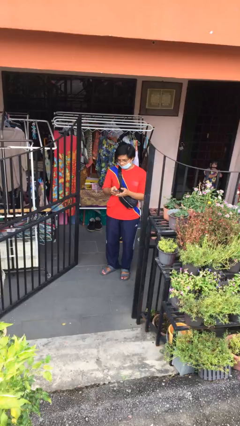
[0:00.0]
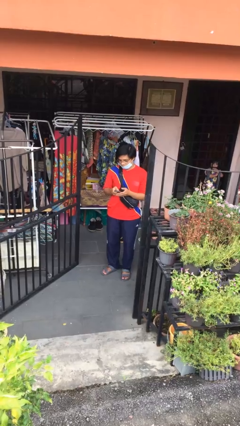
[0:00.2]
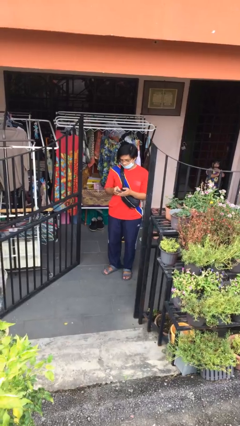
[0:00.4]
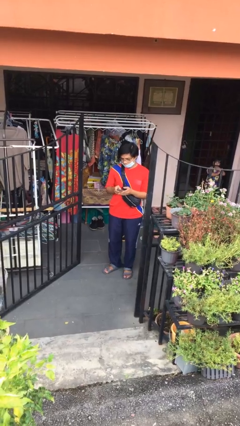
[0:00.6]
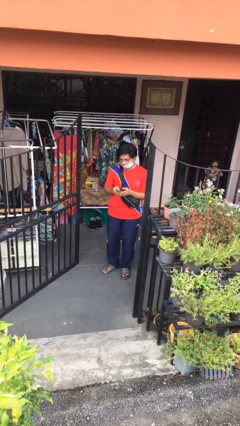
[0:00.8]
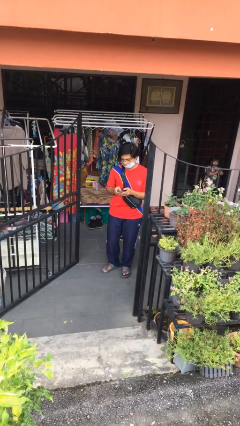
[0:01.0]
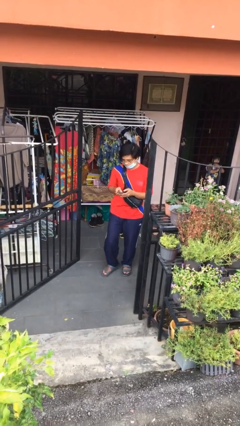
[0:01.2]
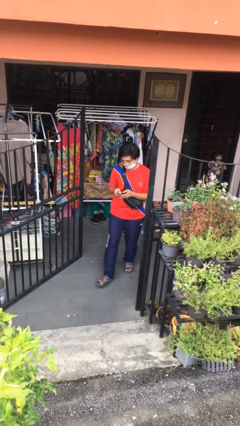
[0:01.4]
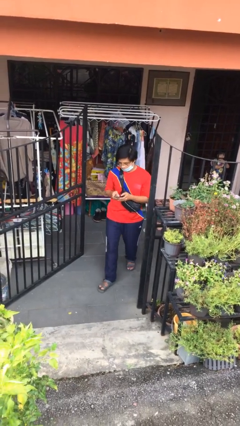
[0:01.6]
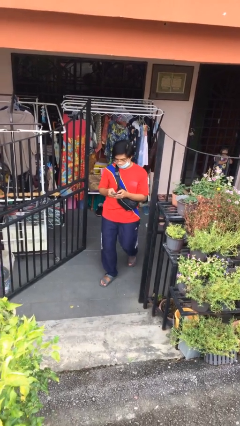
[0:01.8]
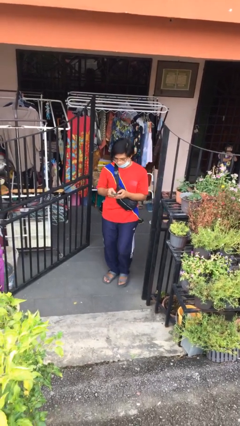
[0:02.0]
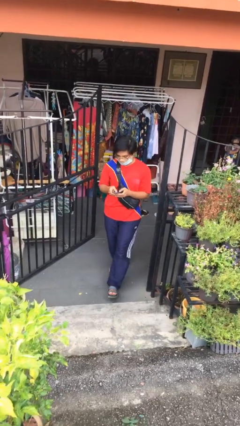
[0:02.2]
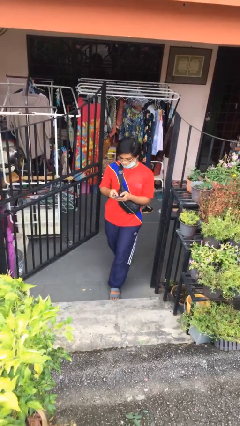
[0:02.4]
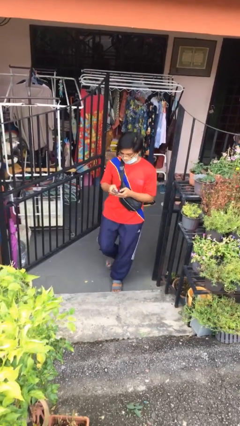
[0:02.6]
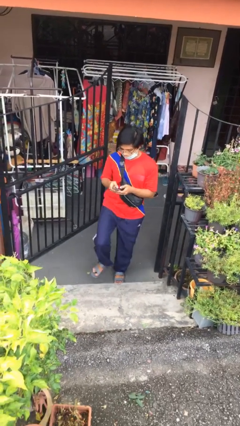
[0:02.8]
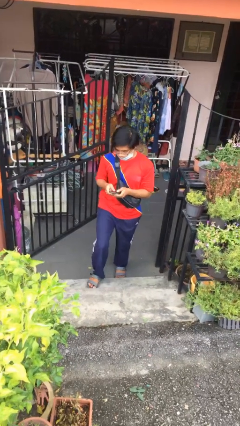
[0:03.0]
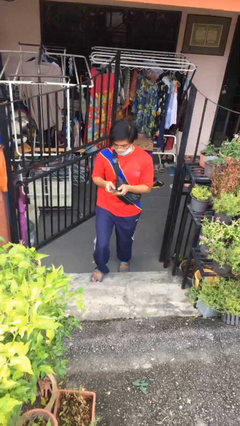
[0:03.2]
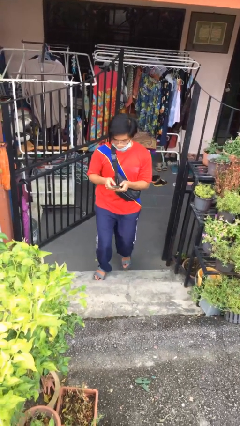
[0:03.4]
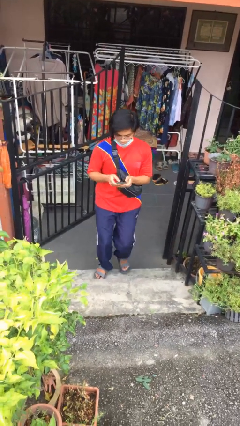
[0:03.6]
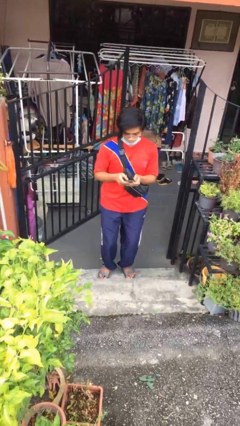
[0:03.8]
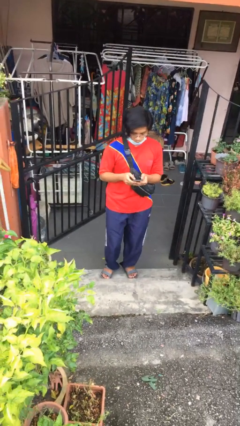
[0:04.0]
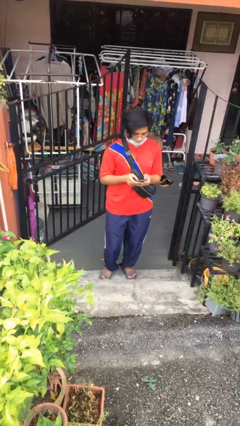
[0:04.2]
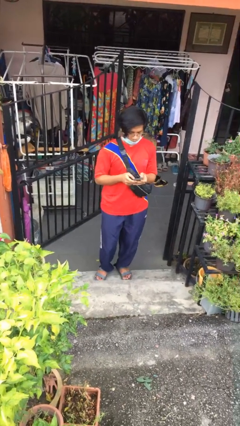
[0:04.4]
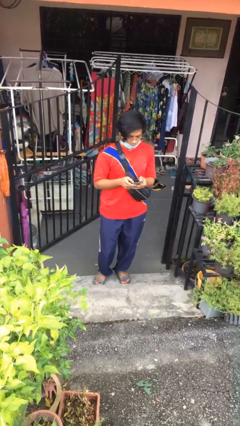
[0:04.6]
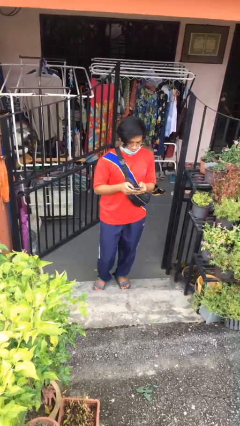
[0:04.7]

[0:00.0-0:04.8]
person enters scene through structure

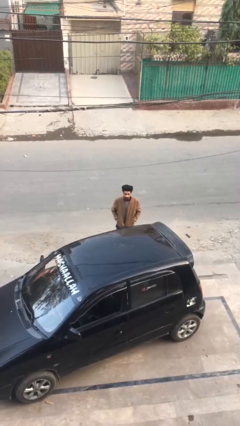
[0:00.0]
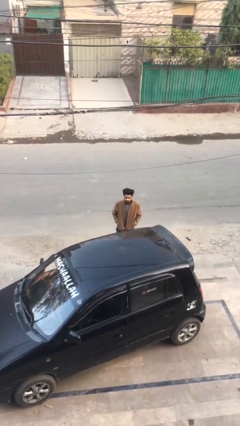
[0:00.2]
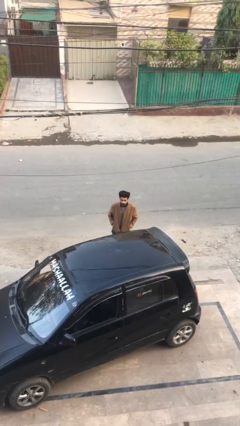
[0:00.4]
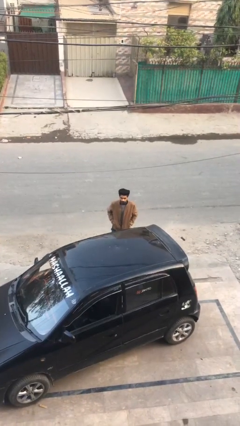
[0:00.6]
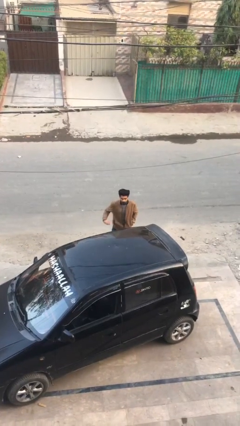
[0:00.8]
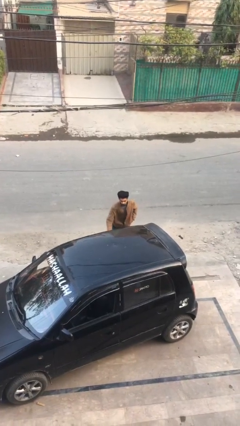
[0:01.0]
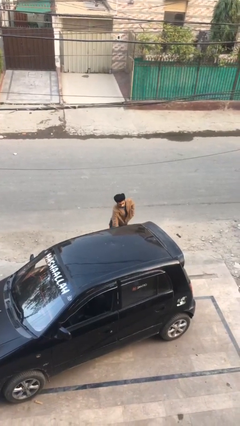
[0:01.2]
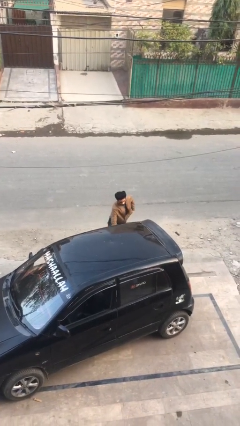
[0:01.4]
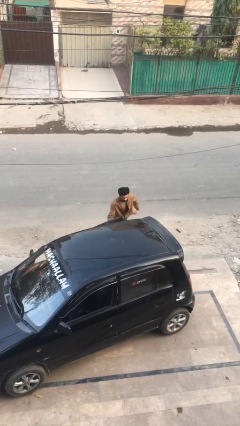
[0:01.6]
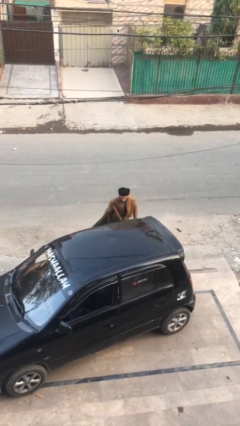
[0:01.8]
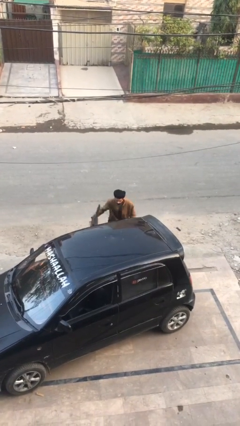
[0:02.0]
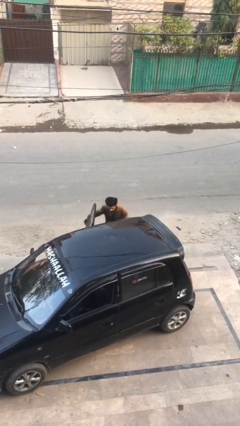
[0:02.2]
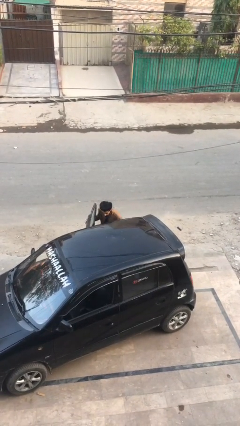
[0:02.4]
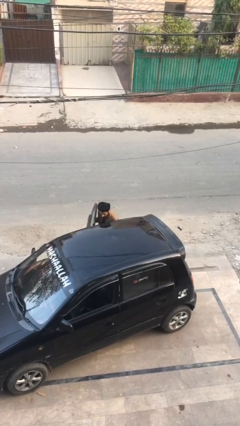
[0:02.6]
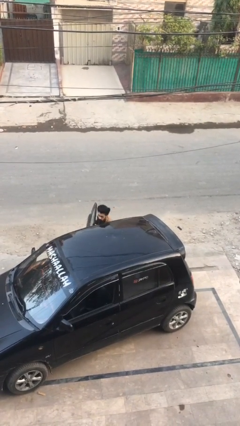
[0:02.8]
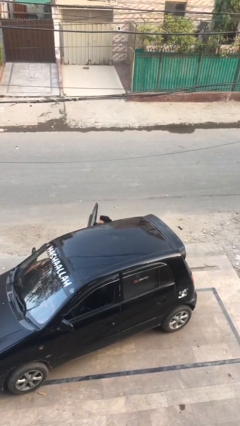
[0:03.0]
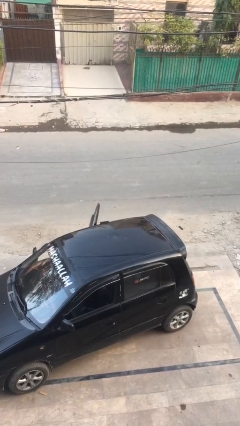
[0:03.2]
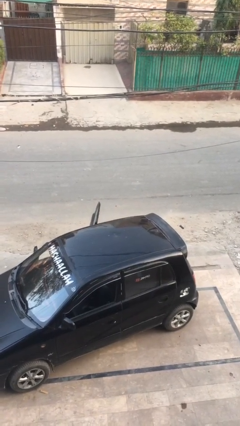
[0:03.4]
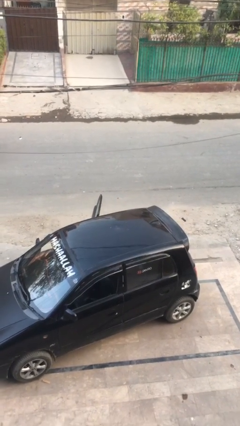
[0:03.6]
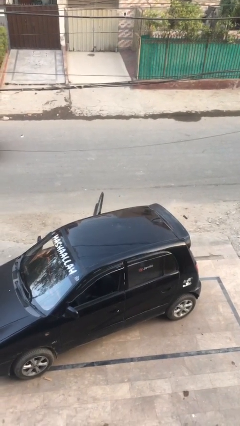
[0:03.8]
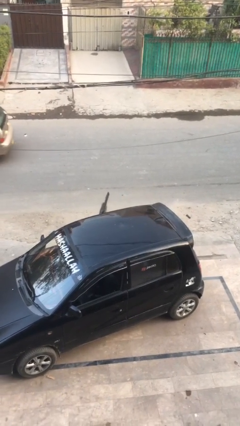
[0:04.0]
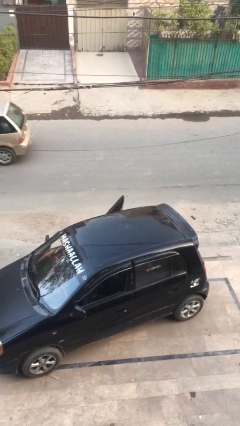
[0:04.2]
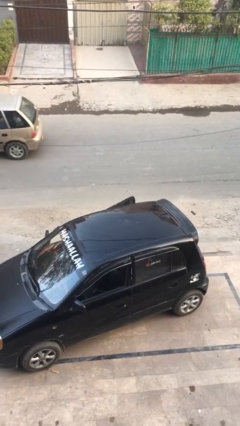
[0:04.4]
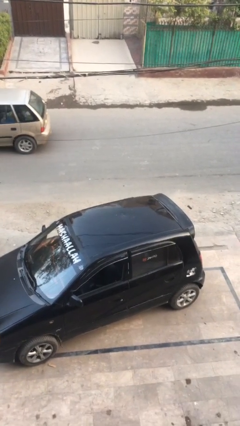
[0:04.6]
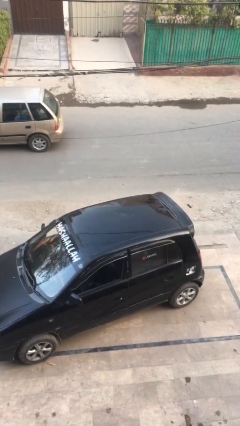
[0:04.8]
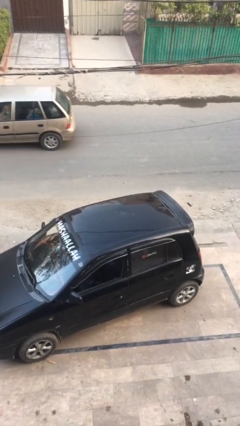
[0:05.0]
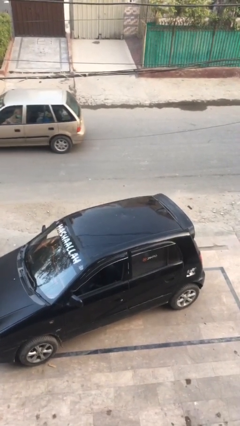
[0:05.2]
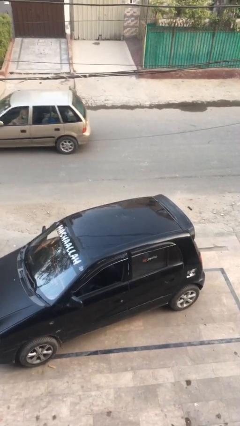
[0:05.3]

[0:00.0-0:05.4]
person enters car

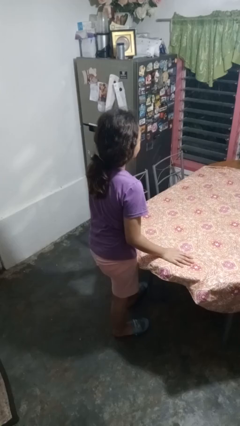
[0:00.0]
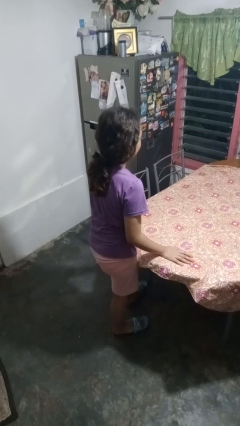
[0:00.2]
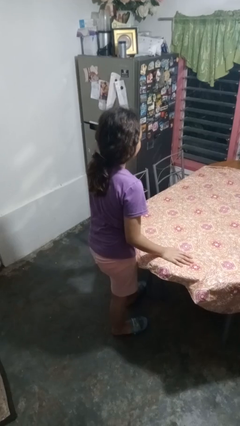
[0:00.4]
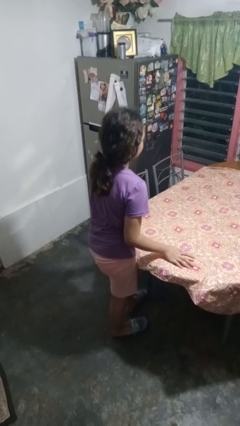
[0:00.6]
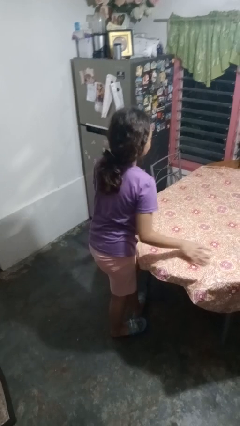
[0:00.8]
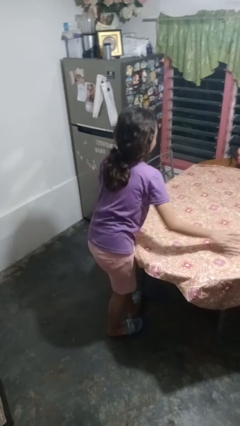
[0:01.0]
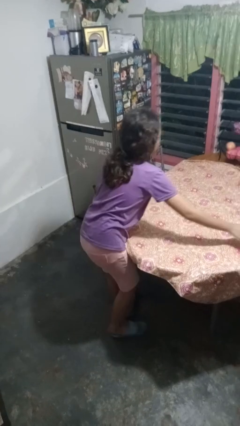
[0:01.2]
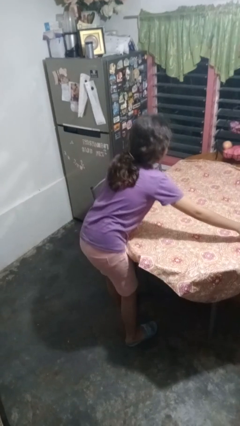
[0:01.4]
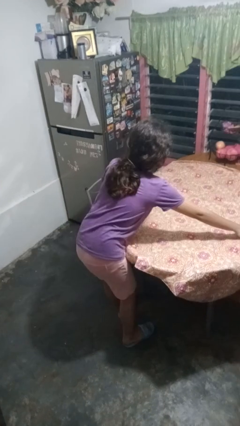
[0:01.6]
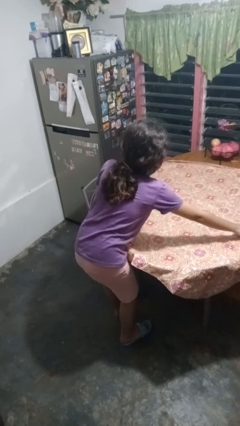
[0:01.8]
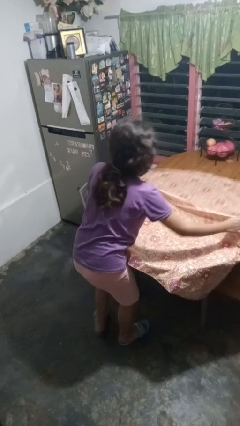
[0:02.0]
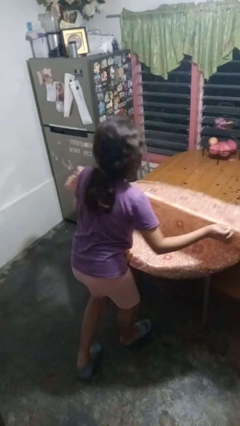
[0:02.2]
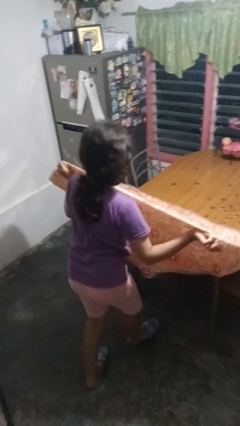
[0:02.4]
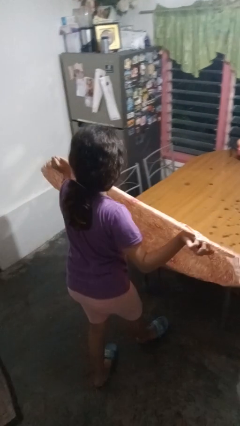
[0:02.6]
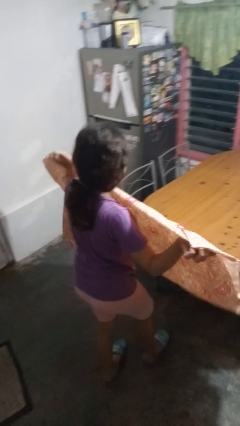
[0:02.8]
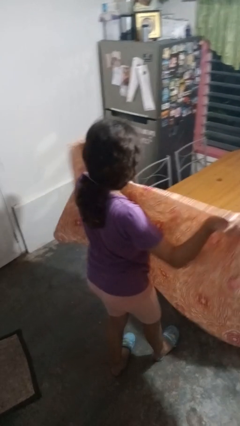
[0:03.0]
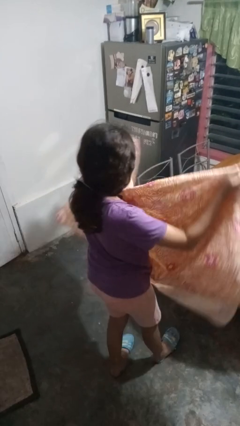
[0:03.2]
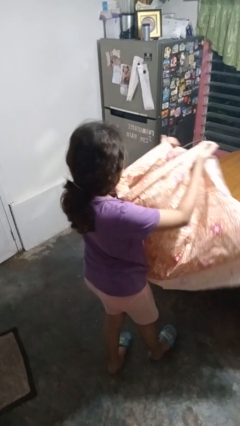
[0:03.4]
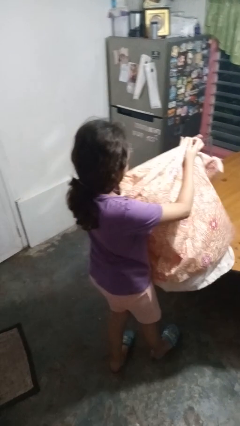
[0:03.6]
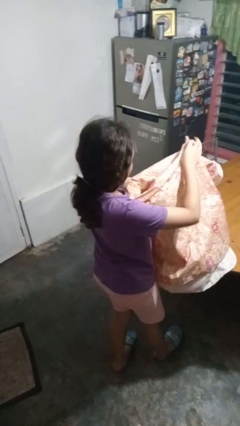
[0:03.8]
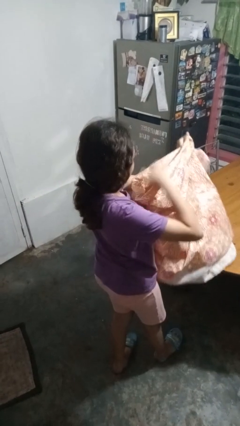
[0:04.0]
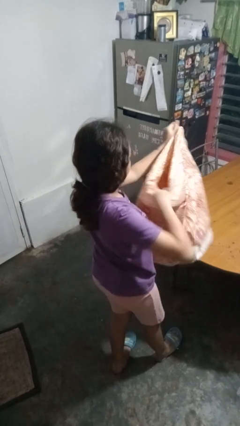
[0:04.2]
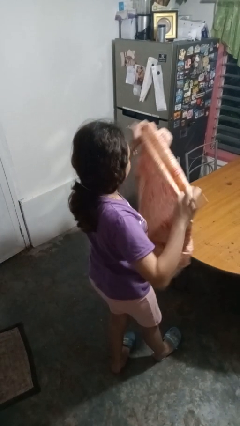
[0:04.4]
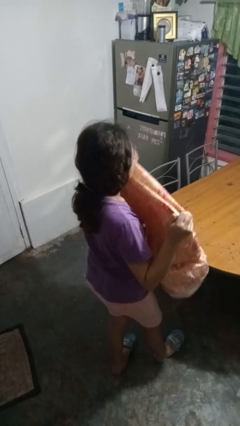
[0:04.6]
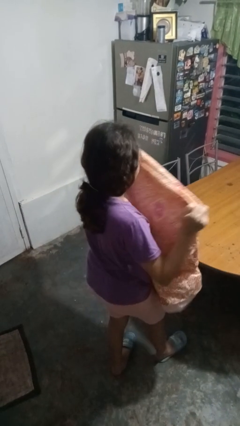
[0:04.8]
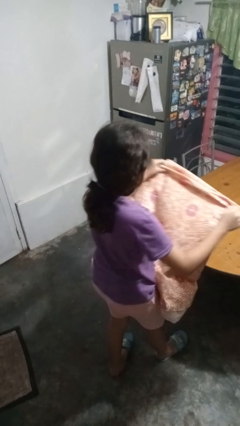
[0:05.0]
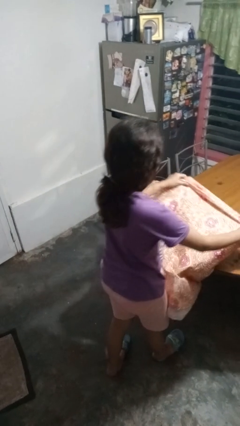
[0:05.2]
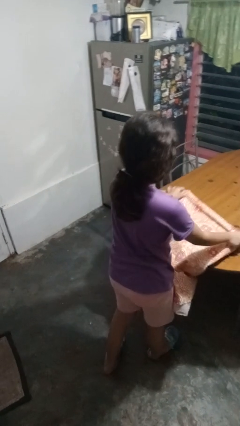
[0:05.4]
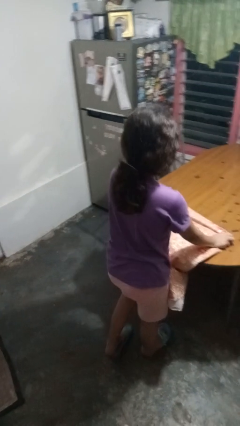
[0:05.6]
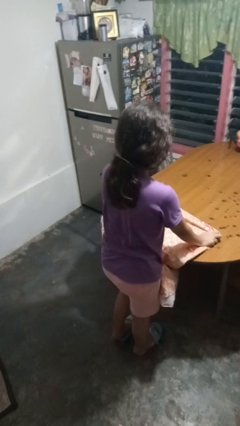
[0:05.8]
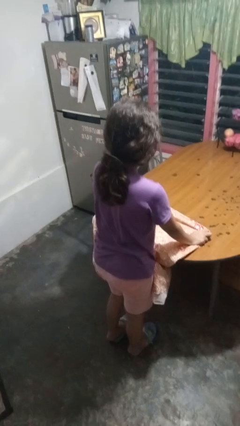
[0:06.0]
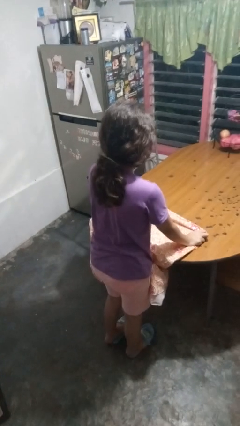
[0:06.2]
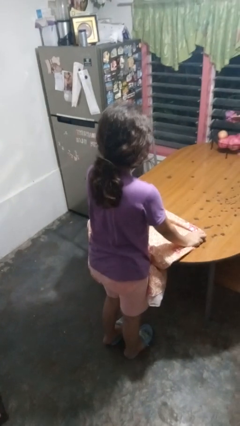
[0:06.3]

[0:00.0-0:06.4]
person folds tablecloth

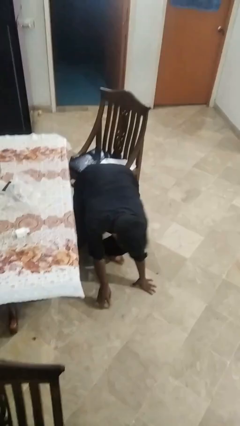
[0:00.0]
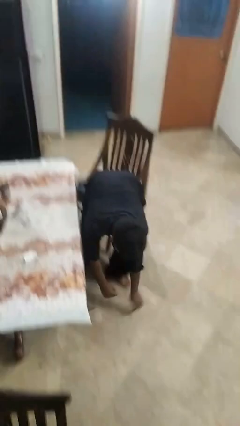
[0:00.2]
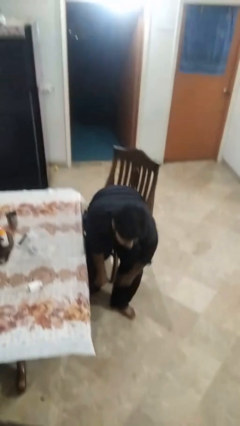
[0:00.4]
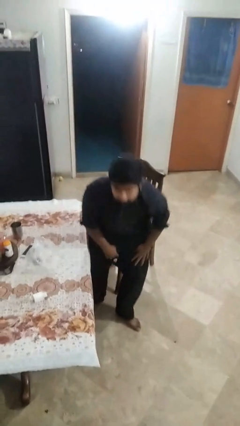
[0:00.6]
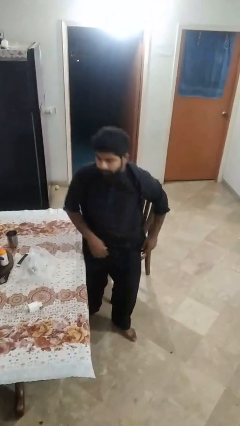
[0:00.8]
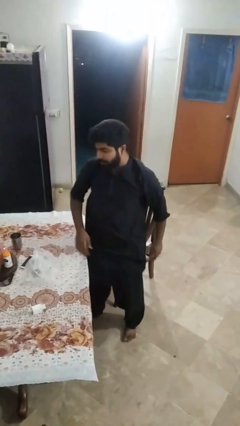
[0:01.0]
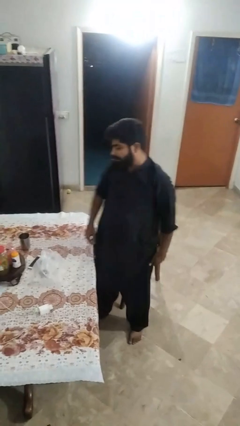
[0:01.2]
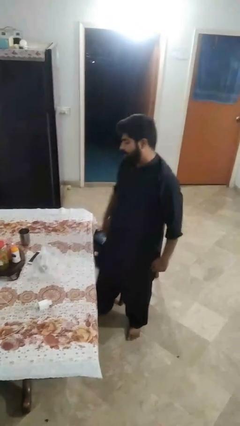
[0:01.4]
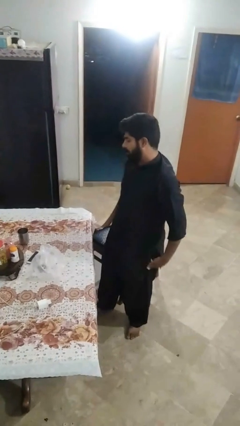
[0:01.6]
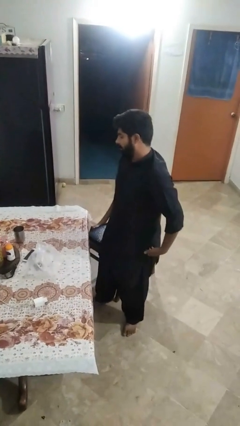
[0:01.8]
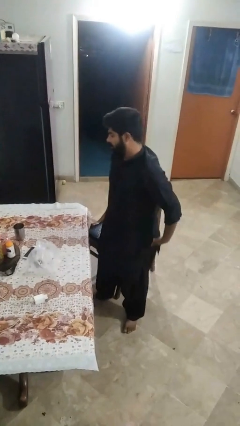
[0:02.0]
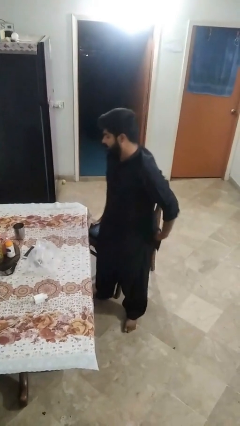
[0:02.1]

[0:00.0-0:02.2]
person stands up from floor
